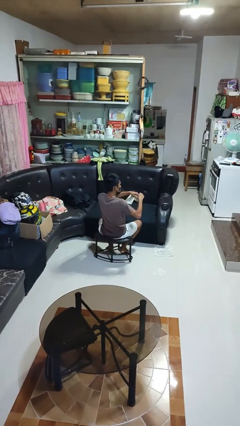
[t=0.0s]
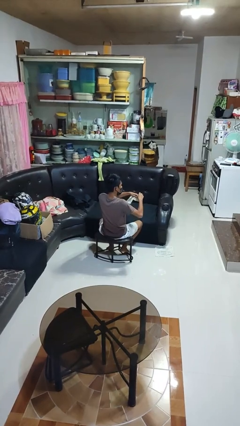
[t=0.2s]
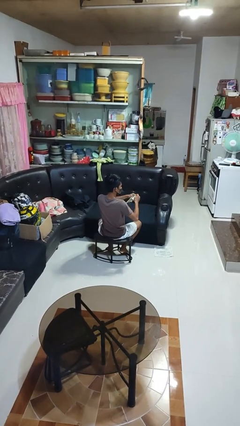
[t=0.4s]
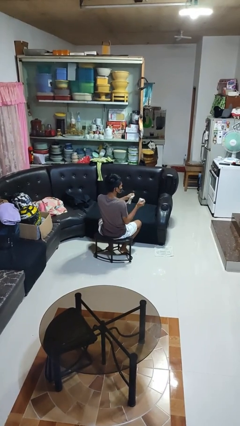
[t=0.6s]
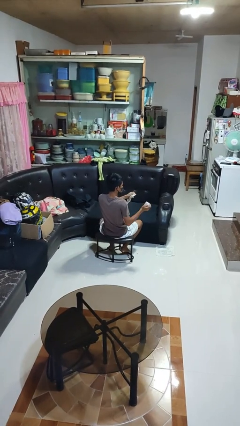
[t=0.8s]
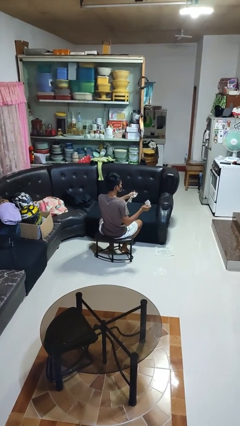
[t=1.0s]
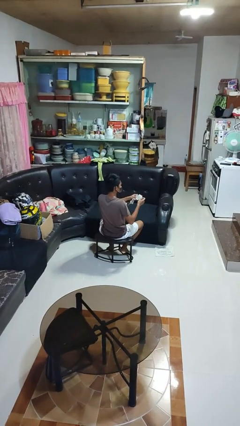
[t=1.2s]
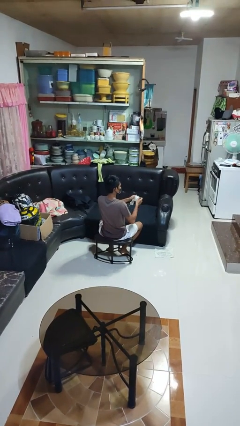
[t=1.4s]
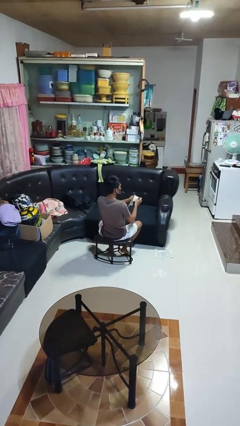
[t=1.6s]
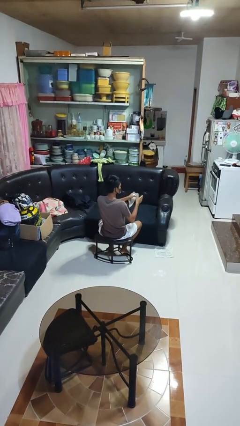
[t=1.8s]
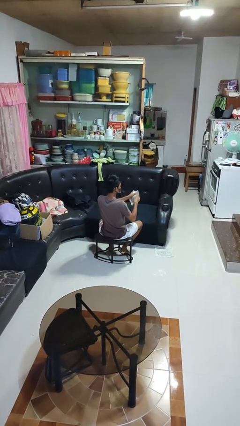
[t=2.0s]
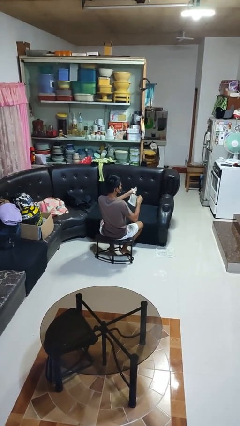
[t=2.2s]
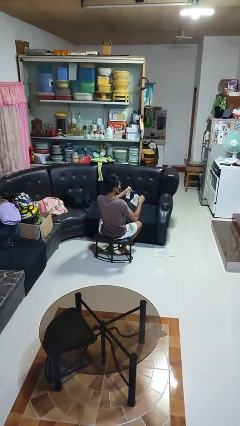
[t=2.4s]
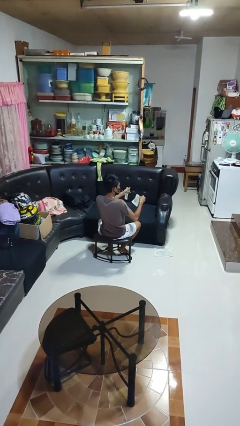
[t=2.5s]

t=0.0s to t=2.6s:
person tears paper

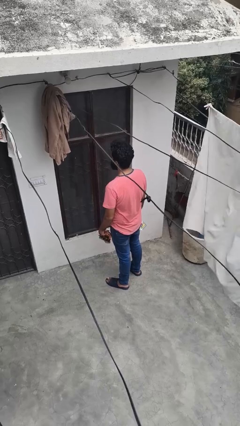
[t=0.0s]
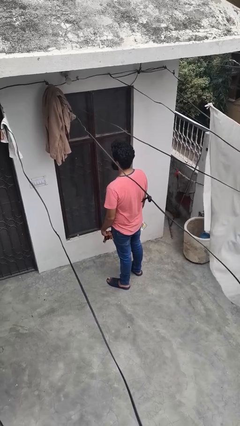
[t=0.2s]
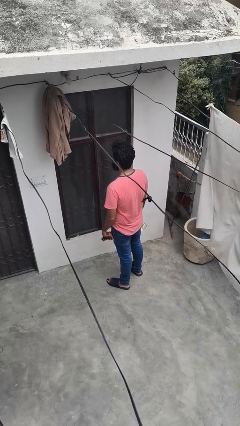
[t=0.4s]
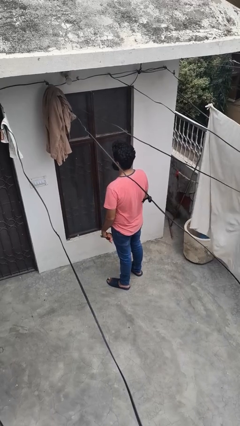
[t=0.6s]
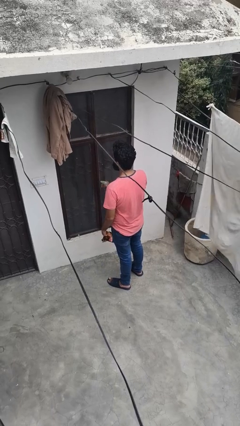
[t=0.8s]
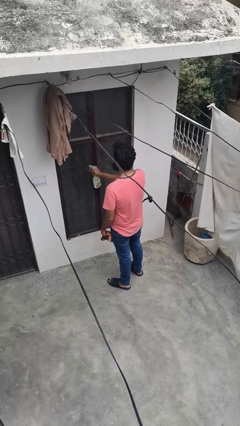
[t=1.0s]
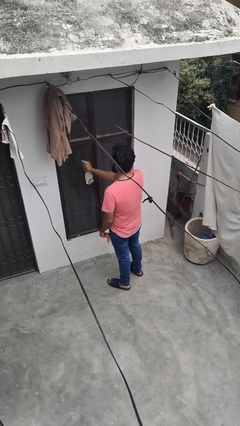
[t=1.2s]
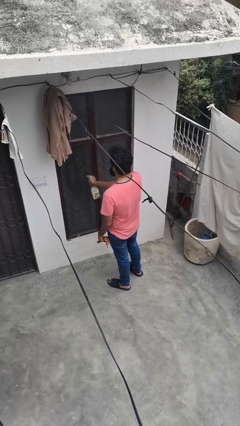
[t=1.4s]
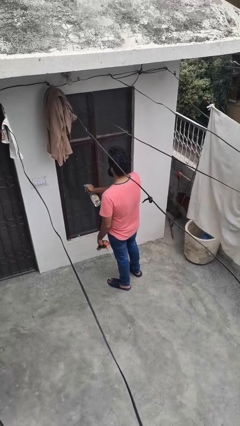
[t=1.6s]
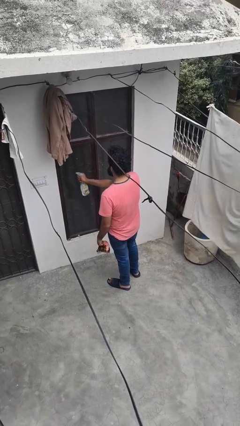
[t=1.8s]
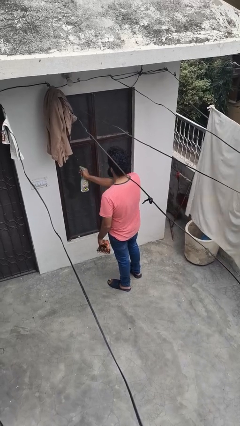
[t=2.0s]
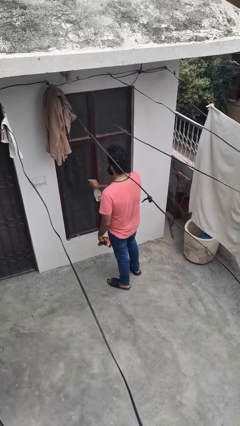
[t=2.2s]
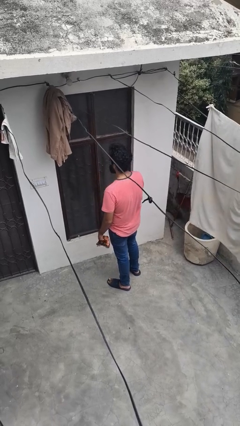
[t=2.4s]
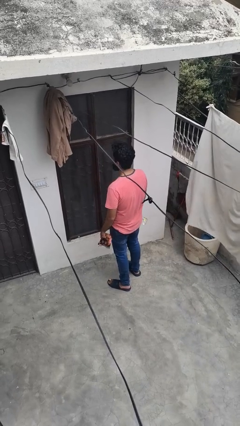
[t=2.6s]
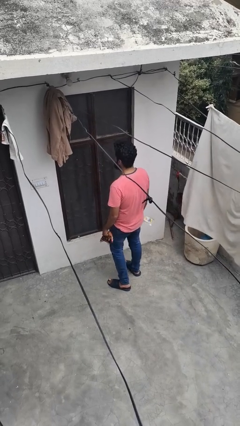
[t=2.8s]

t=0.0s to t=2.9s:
person sprays from bottle

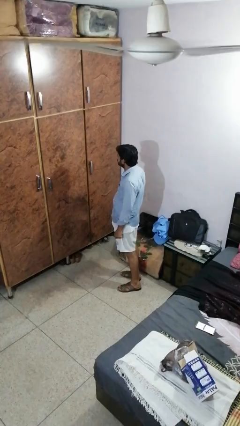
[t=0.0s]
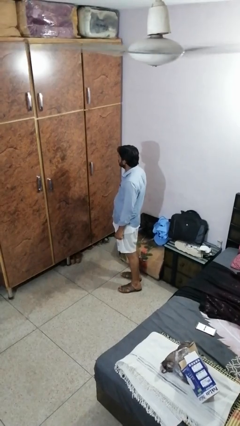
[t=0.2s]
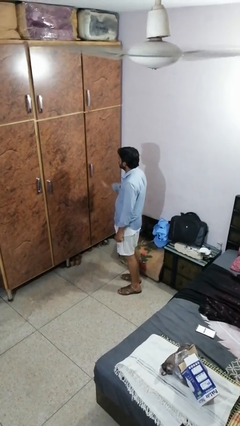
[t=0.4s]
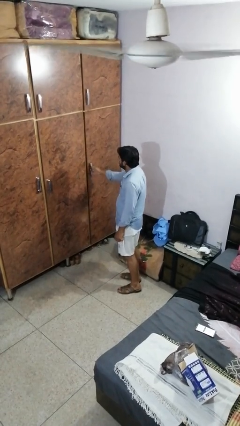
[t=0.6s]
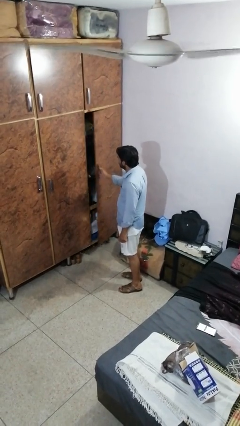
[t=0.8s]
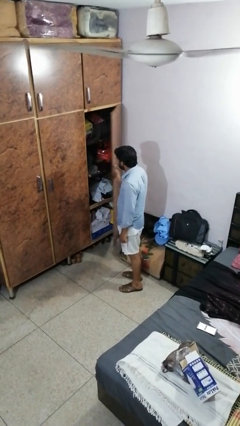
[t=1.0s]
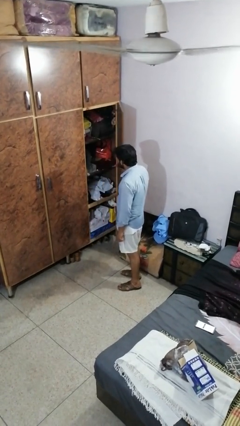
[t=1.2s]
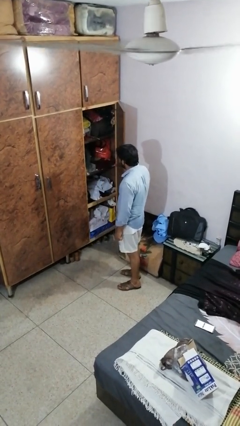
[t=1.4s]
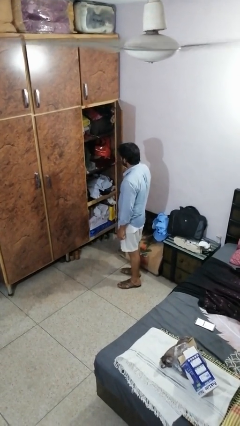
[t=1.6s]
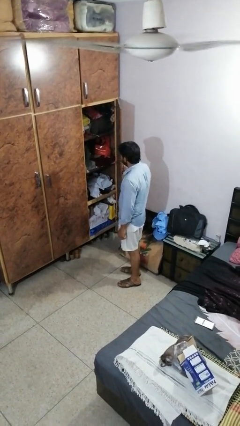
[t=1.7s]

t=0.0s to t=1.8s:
person opens closet door

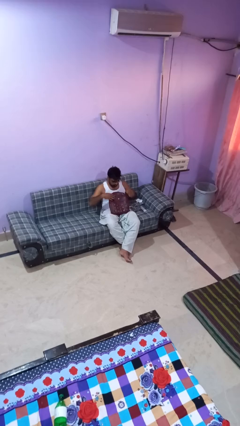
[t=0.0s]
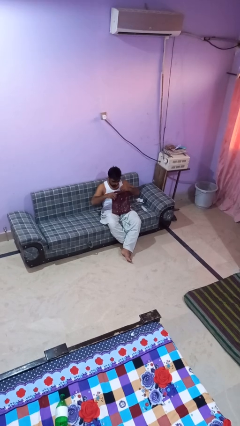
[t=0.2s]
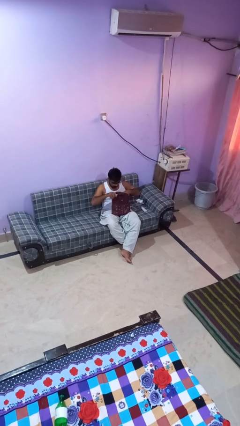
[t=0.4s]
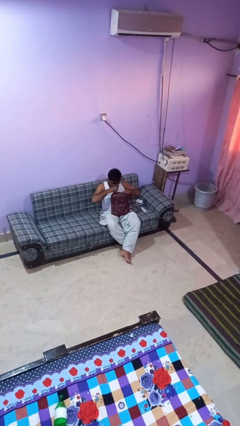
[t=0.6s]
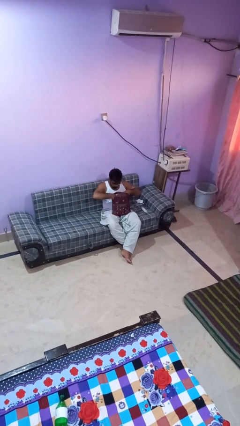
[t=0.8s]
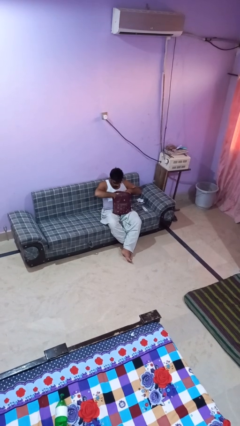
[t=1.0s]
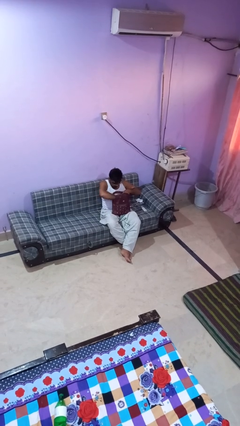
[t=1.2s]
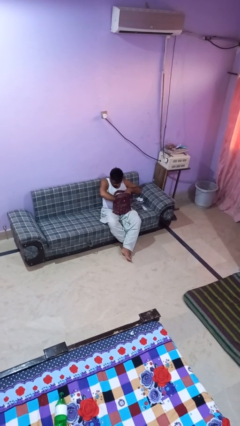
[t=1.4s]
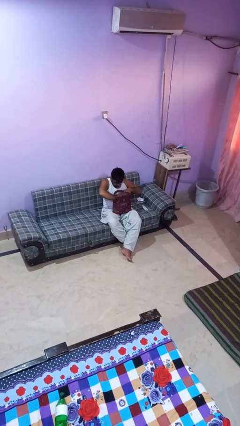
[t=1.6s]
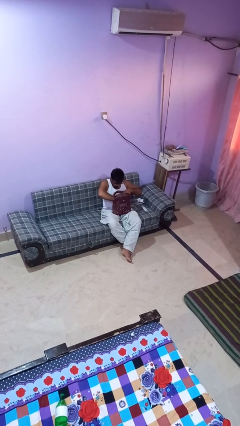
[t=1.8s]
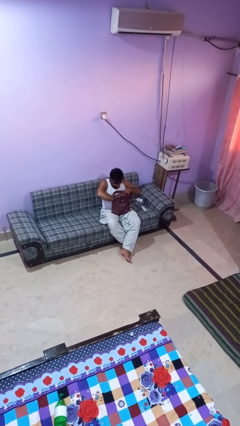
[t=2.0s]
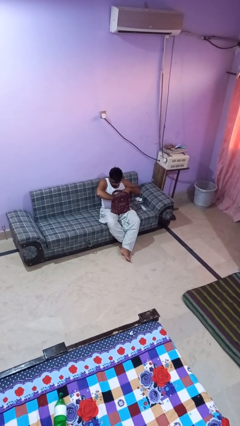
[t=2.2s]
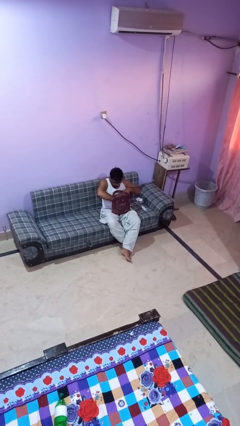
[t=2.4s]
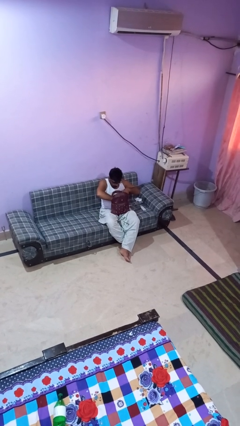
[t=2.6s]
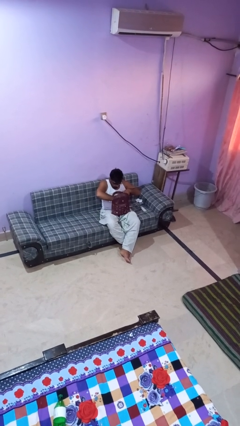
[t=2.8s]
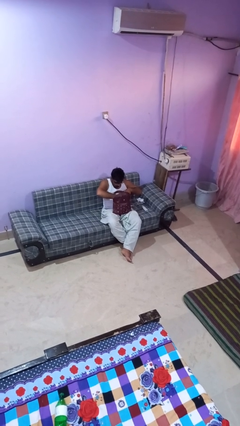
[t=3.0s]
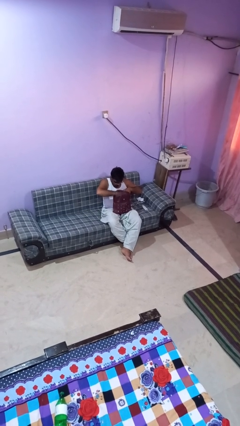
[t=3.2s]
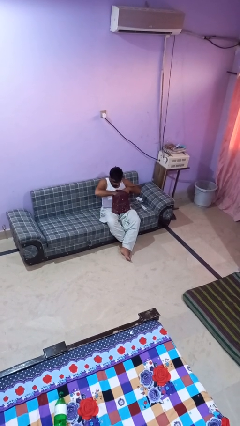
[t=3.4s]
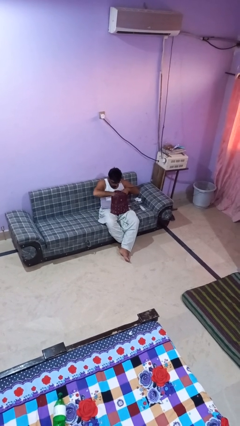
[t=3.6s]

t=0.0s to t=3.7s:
person searches in backpack

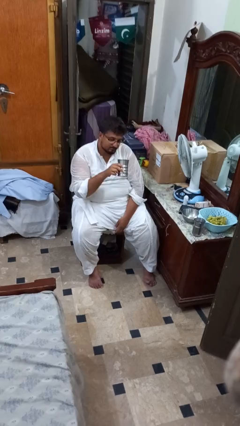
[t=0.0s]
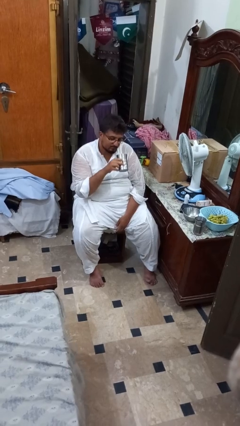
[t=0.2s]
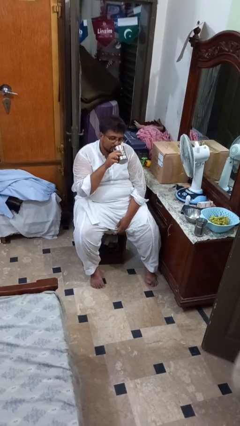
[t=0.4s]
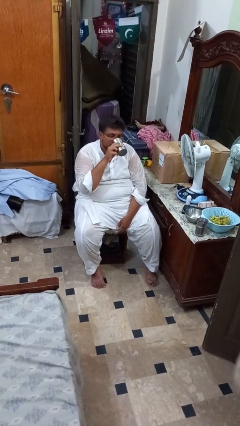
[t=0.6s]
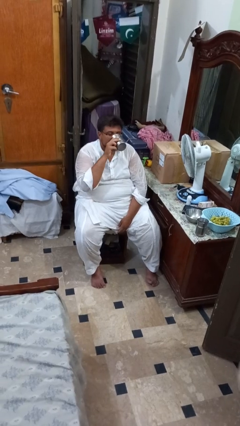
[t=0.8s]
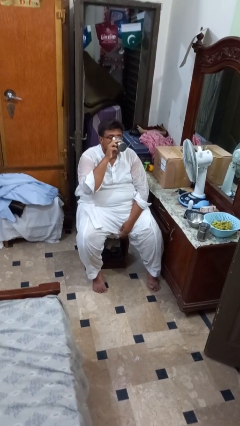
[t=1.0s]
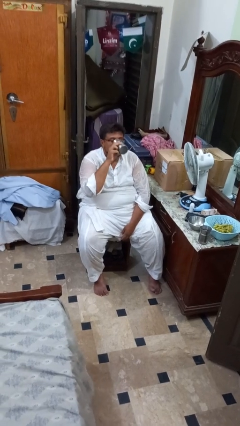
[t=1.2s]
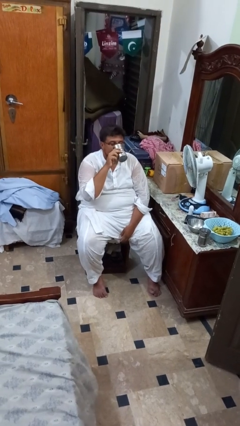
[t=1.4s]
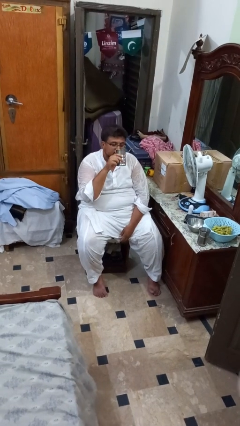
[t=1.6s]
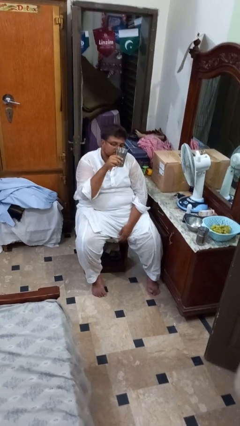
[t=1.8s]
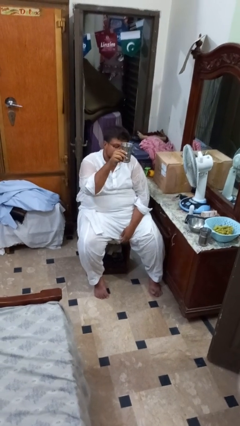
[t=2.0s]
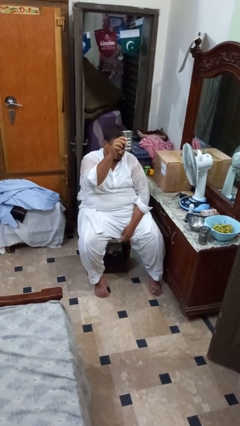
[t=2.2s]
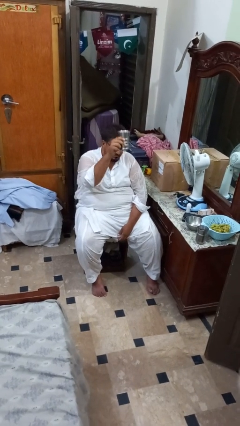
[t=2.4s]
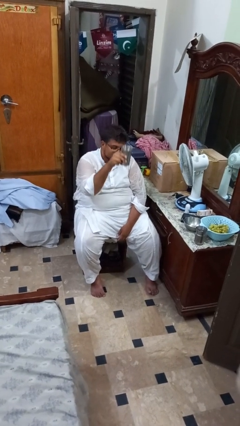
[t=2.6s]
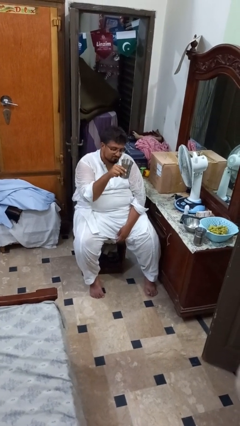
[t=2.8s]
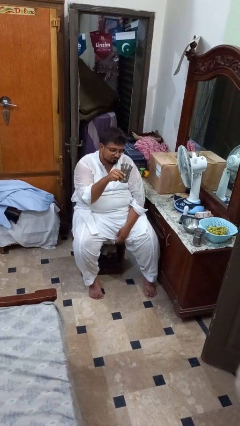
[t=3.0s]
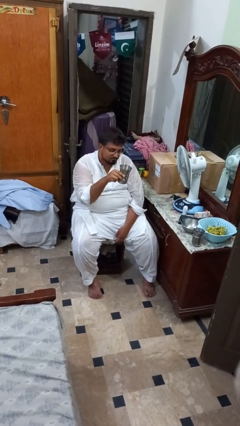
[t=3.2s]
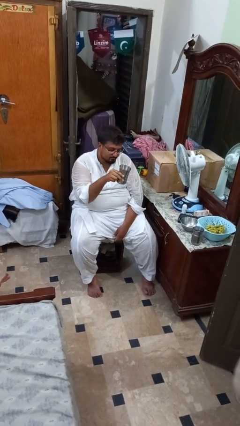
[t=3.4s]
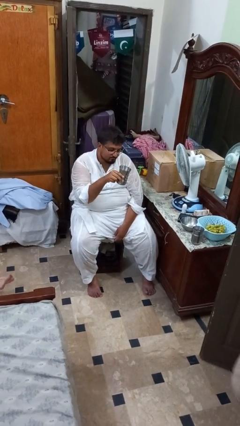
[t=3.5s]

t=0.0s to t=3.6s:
person drinks from shotglass

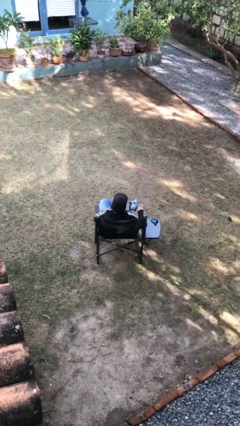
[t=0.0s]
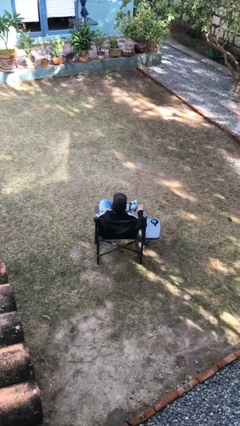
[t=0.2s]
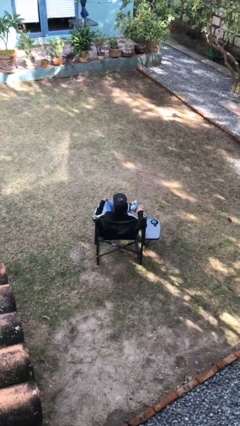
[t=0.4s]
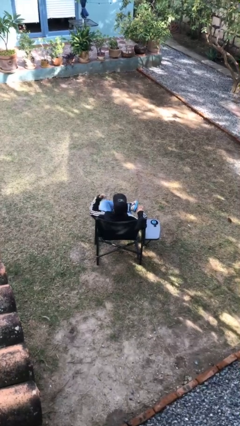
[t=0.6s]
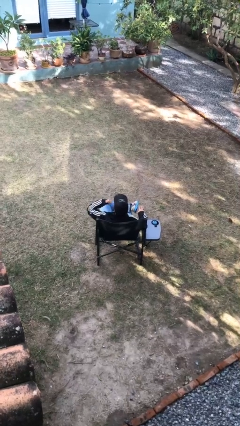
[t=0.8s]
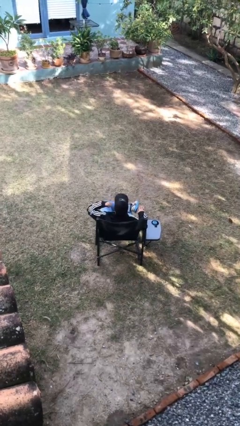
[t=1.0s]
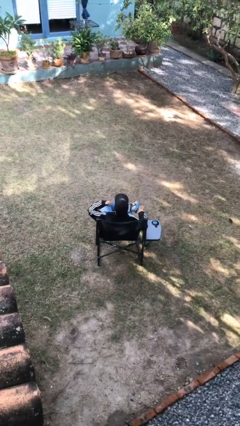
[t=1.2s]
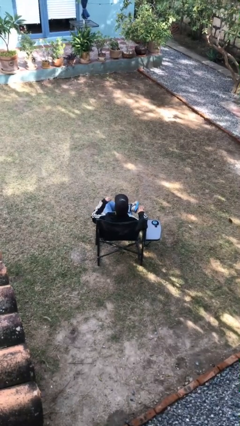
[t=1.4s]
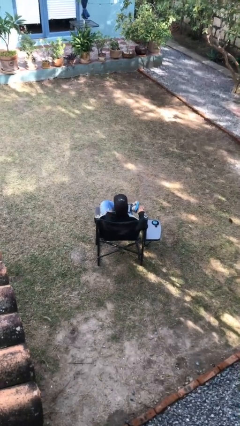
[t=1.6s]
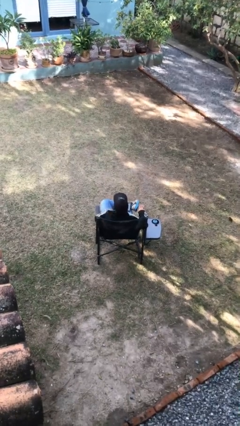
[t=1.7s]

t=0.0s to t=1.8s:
person gestures call me

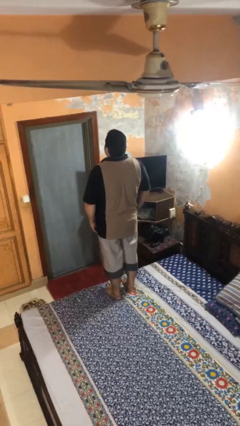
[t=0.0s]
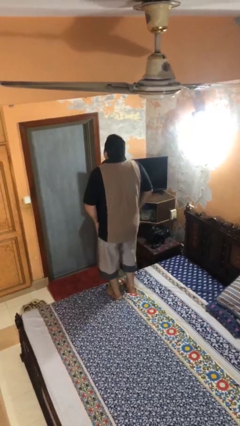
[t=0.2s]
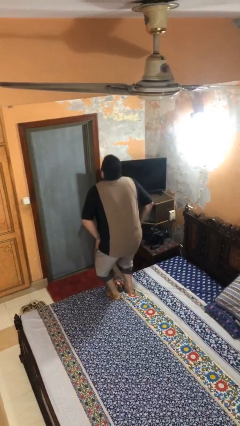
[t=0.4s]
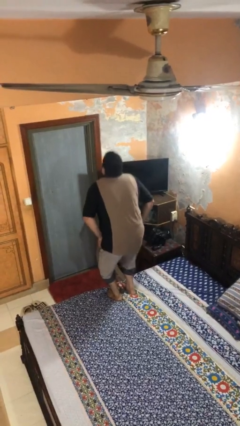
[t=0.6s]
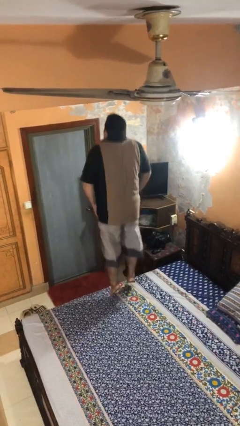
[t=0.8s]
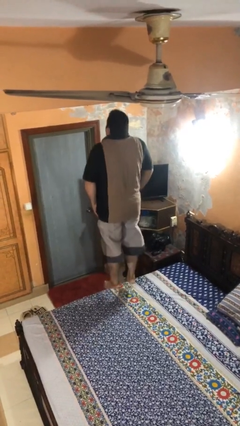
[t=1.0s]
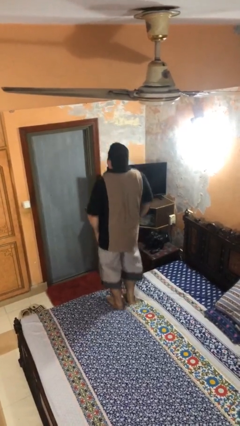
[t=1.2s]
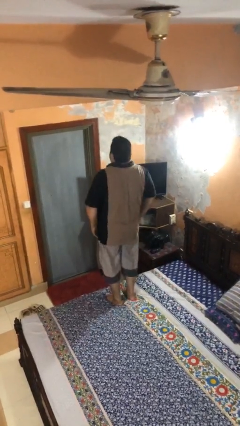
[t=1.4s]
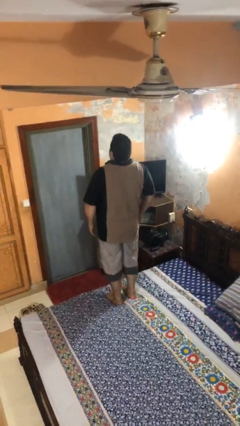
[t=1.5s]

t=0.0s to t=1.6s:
person jumps on bed
